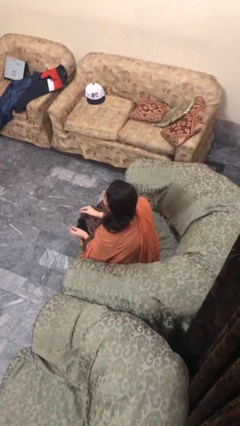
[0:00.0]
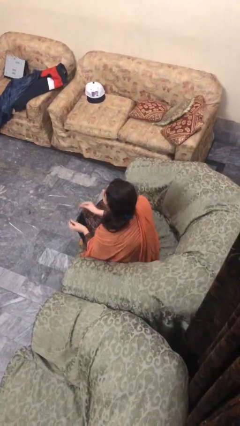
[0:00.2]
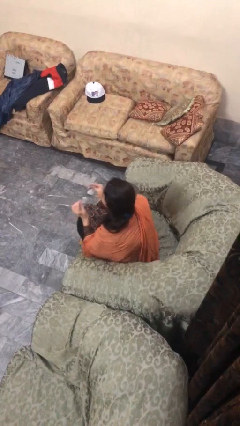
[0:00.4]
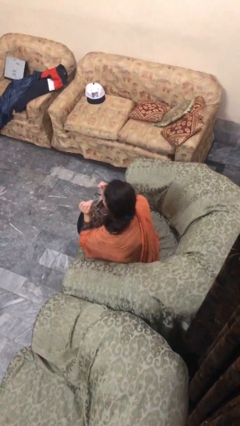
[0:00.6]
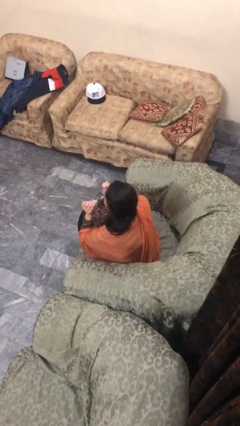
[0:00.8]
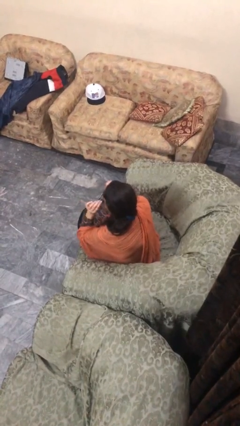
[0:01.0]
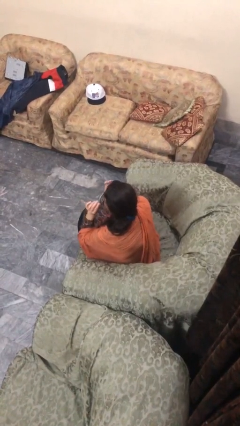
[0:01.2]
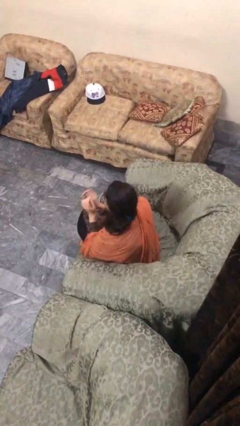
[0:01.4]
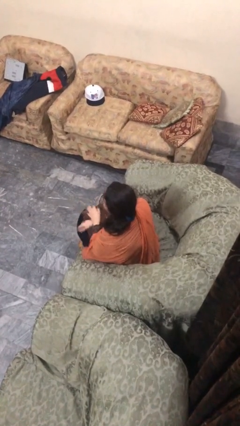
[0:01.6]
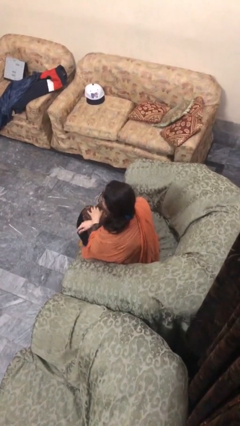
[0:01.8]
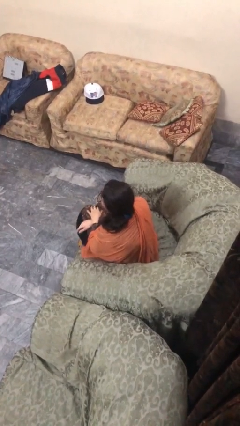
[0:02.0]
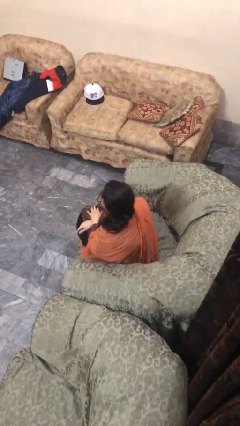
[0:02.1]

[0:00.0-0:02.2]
person puts on glasses

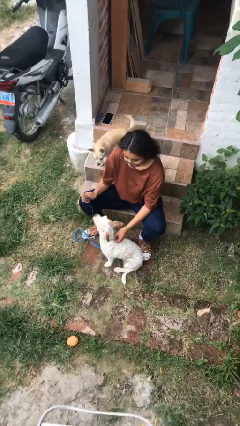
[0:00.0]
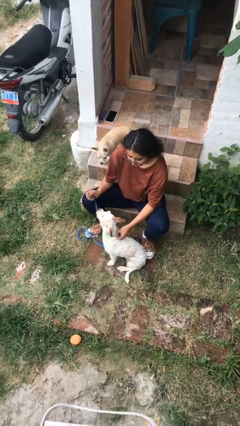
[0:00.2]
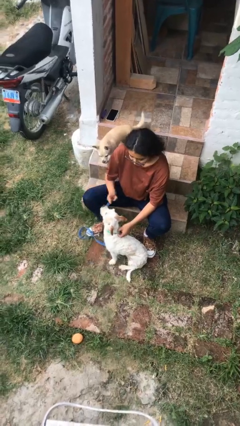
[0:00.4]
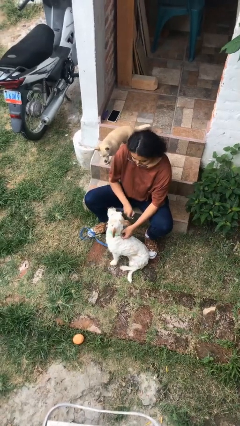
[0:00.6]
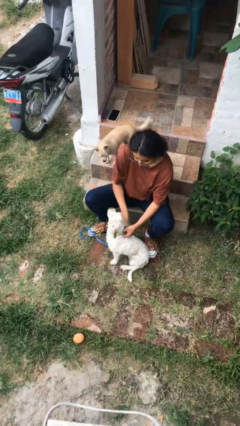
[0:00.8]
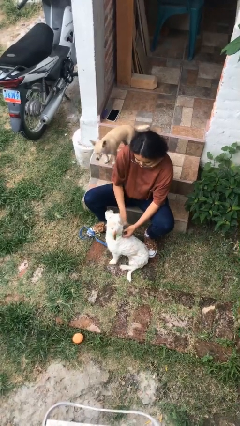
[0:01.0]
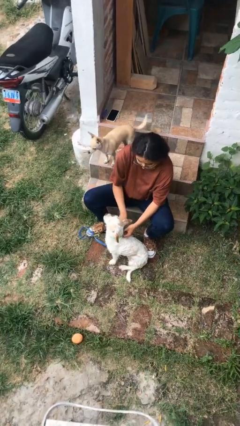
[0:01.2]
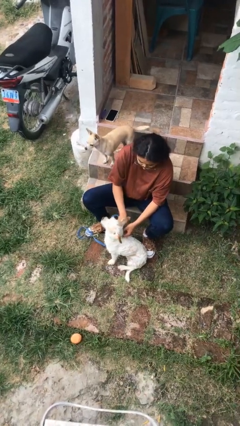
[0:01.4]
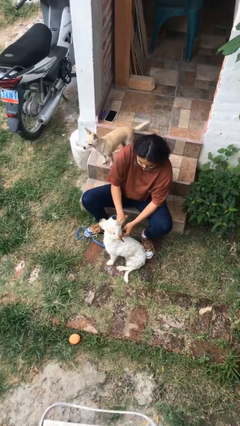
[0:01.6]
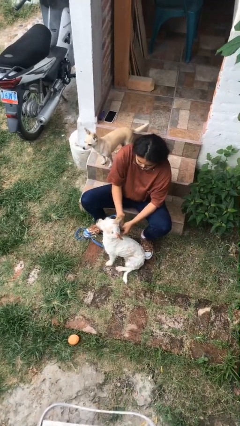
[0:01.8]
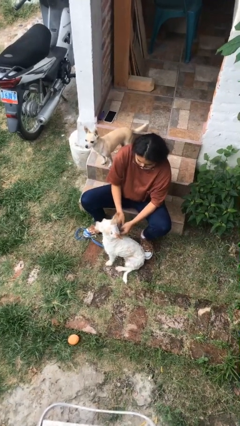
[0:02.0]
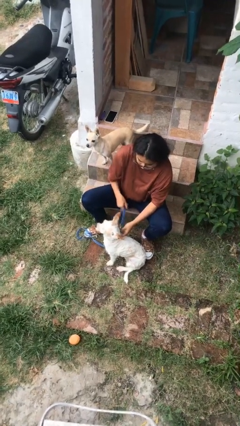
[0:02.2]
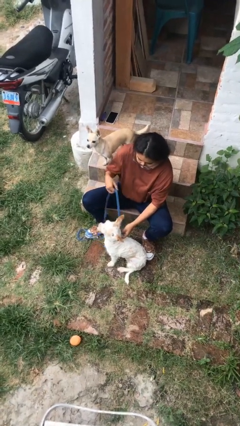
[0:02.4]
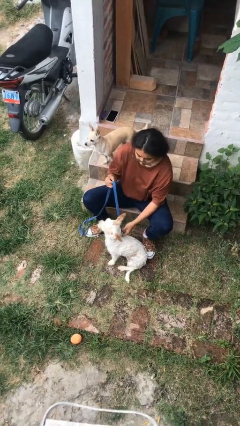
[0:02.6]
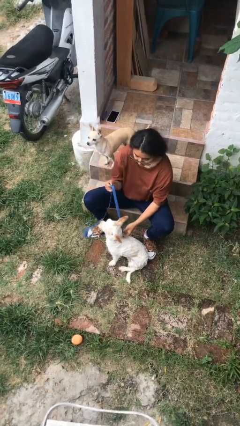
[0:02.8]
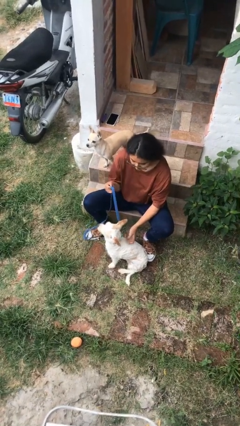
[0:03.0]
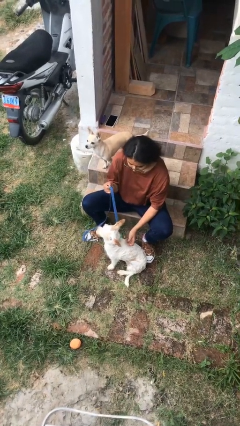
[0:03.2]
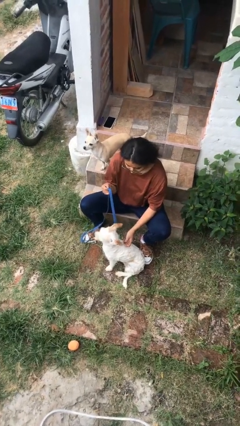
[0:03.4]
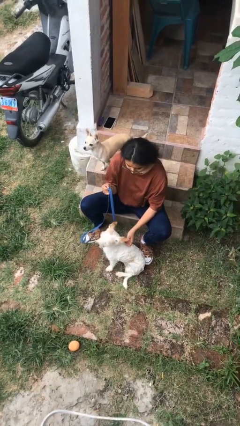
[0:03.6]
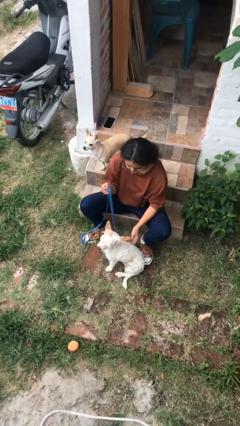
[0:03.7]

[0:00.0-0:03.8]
person attaches leash to dog

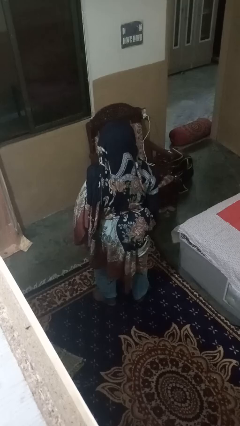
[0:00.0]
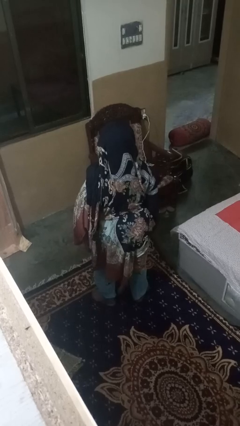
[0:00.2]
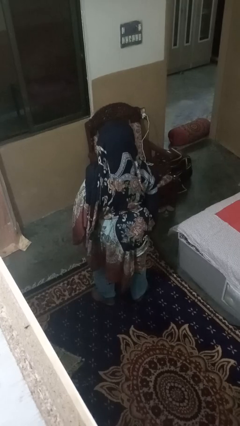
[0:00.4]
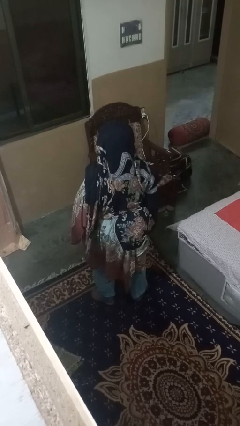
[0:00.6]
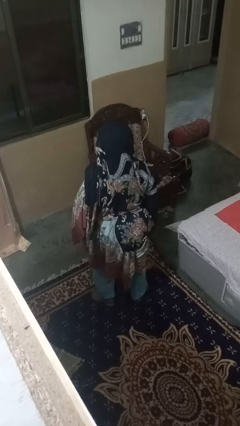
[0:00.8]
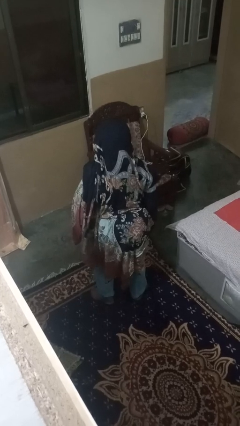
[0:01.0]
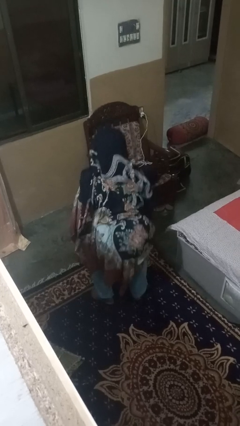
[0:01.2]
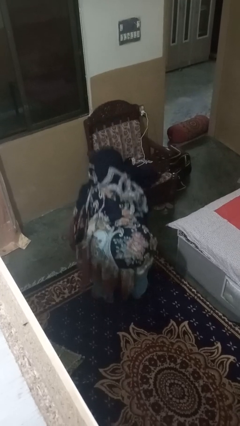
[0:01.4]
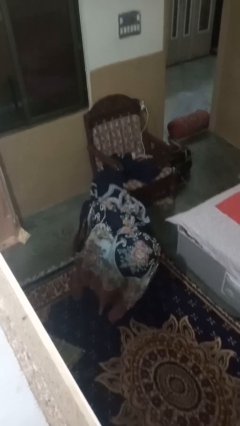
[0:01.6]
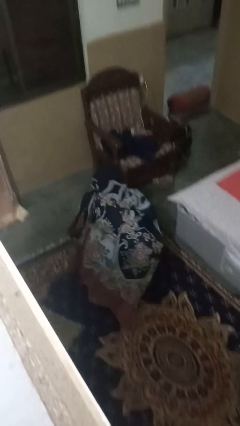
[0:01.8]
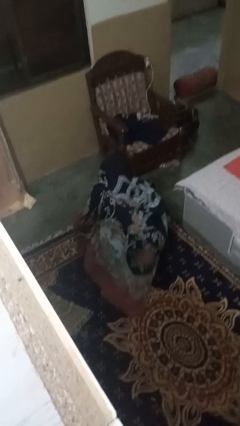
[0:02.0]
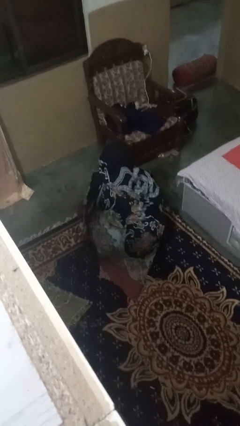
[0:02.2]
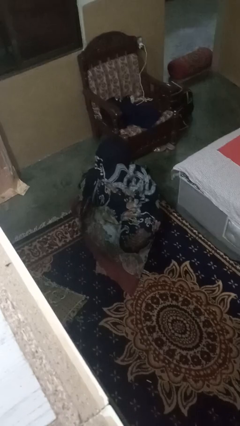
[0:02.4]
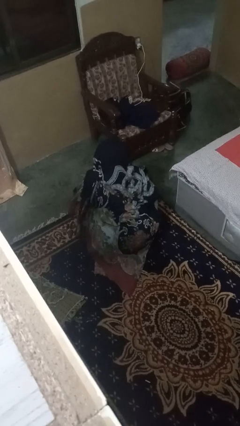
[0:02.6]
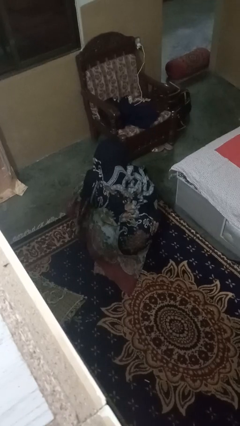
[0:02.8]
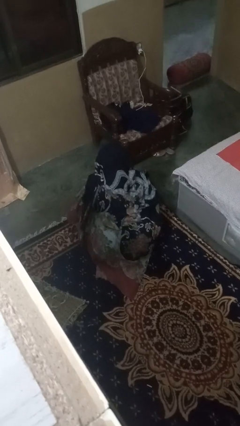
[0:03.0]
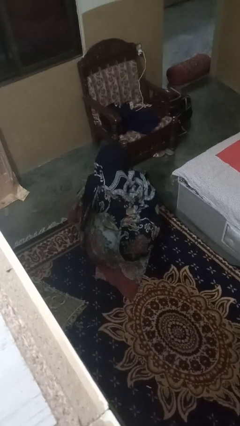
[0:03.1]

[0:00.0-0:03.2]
person squats

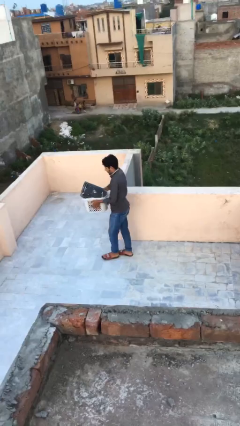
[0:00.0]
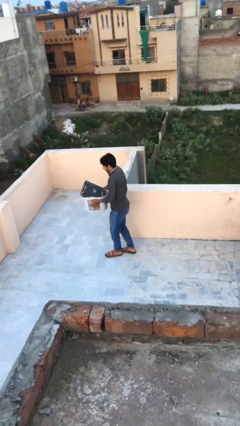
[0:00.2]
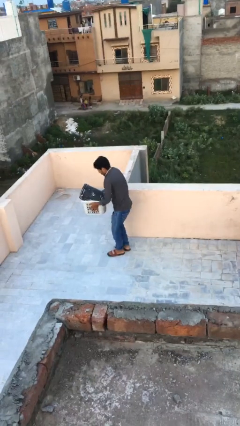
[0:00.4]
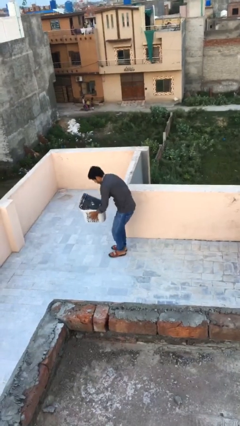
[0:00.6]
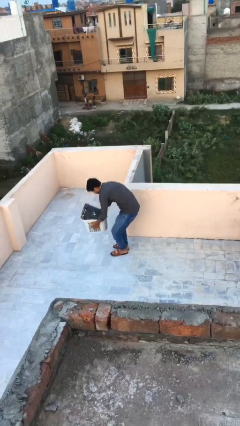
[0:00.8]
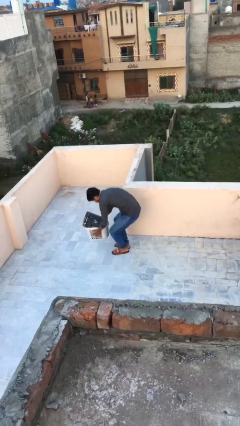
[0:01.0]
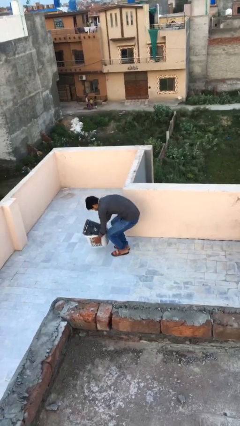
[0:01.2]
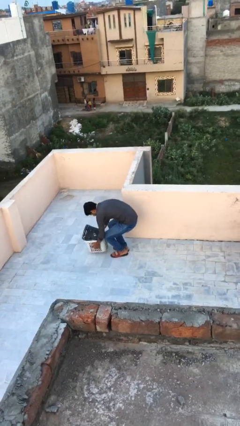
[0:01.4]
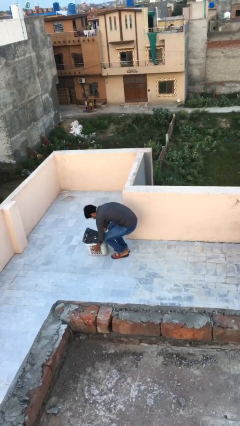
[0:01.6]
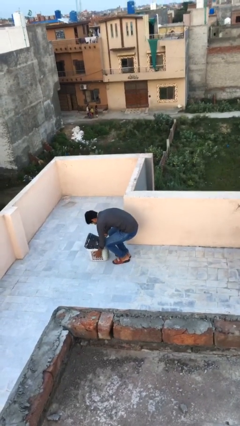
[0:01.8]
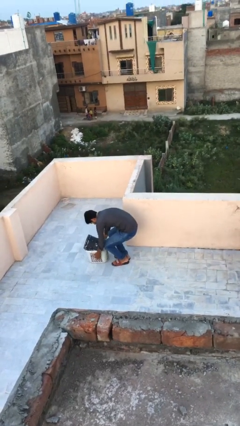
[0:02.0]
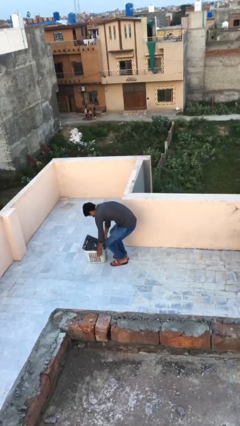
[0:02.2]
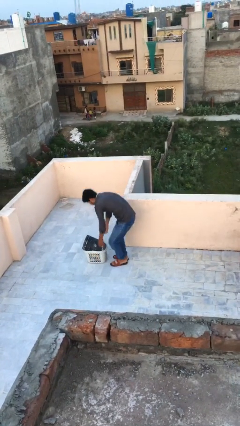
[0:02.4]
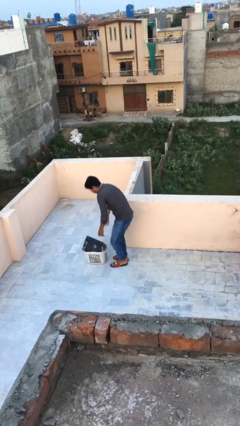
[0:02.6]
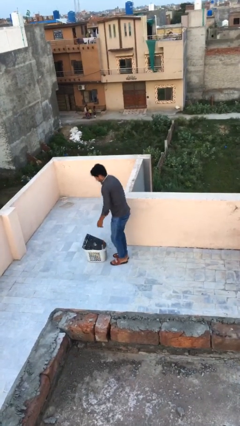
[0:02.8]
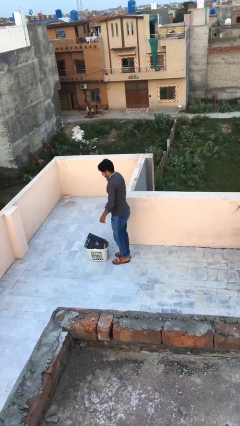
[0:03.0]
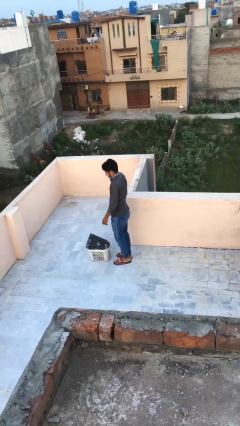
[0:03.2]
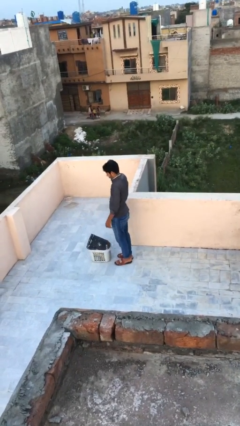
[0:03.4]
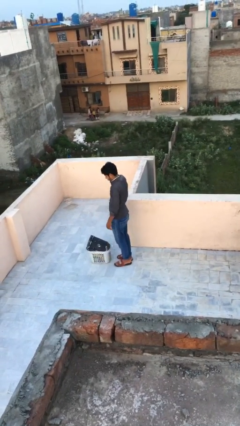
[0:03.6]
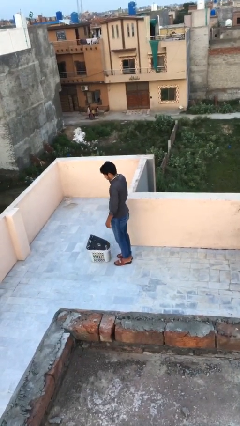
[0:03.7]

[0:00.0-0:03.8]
person puts down object on floor

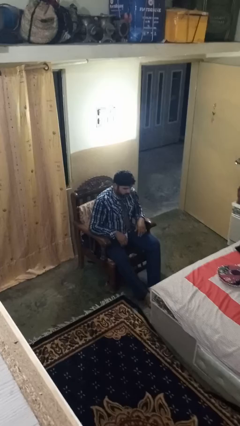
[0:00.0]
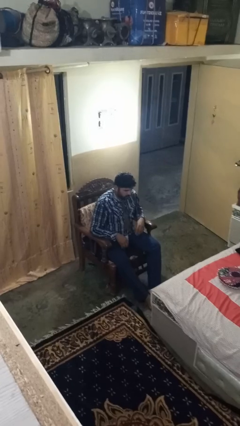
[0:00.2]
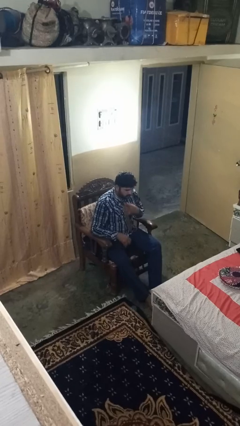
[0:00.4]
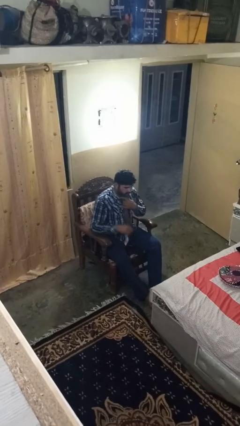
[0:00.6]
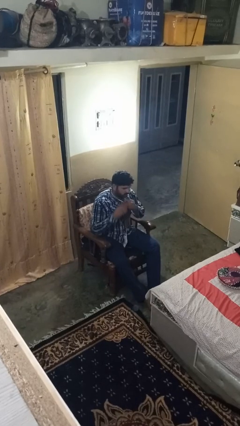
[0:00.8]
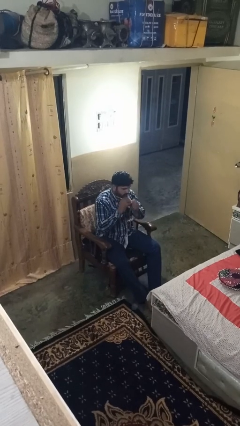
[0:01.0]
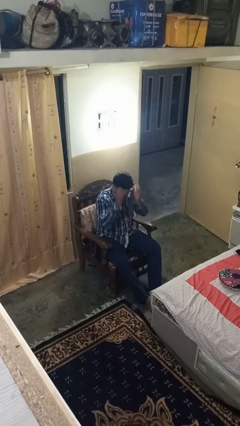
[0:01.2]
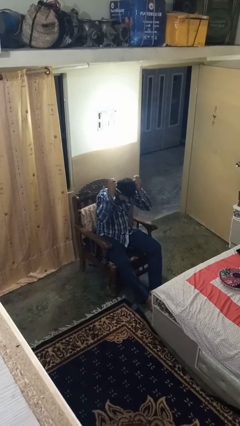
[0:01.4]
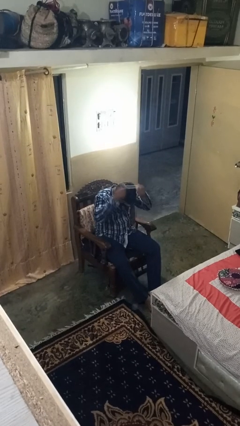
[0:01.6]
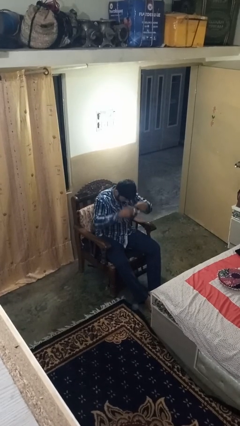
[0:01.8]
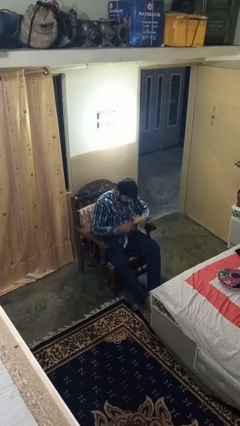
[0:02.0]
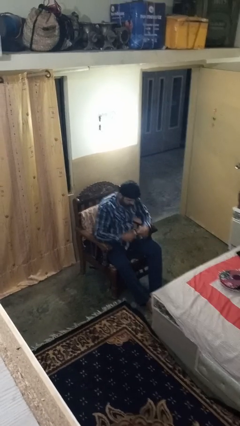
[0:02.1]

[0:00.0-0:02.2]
person takes off necktie

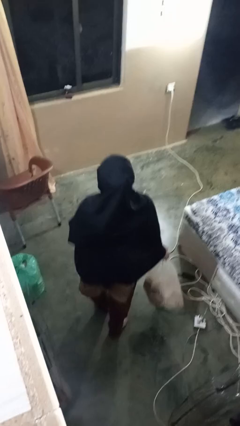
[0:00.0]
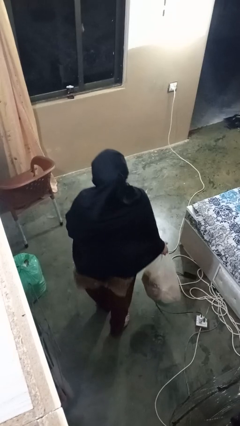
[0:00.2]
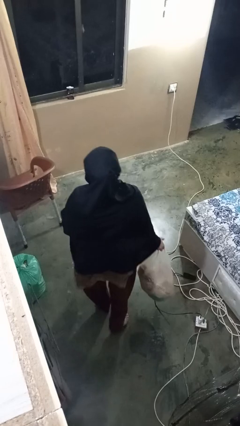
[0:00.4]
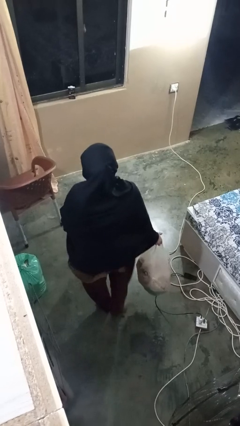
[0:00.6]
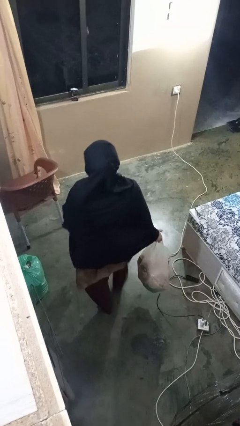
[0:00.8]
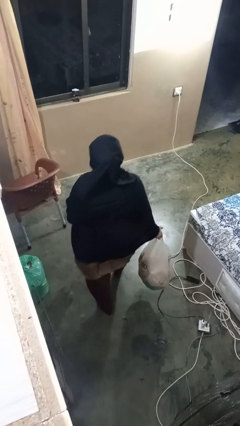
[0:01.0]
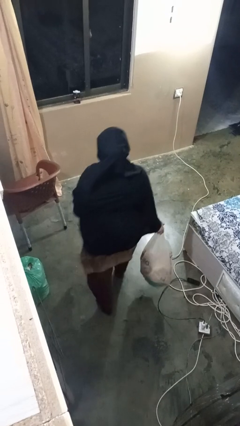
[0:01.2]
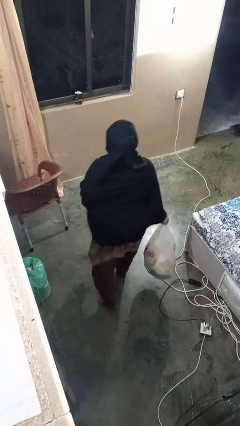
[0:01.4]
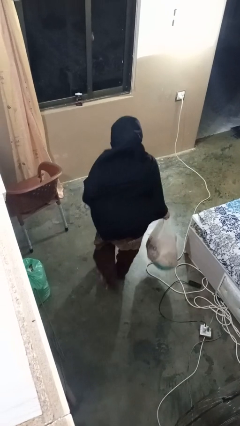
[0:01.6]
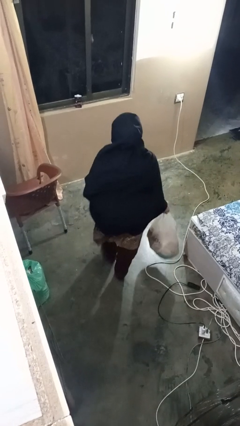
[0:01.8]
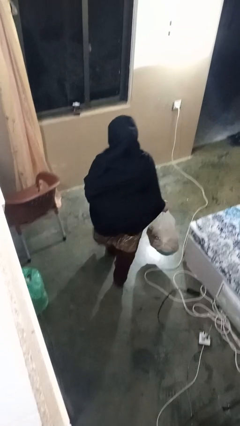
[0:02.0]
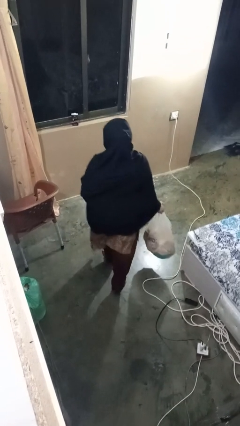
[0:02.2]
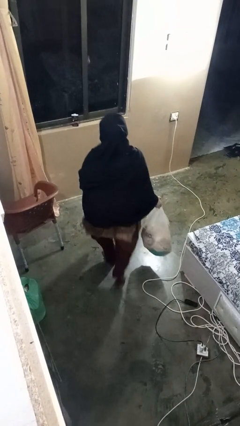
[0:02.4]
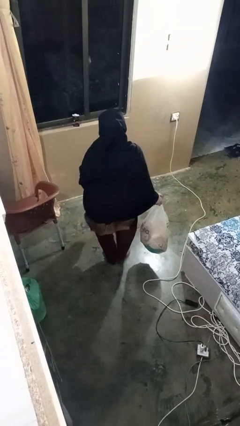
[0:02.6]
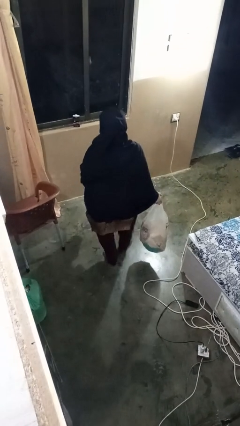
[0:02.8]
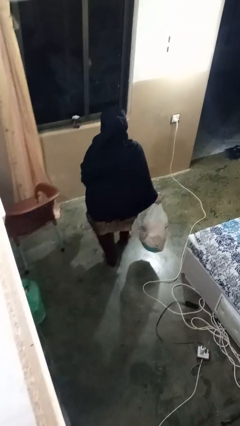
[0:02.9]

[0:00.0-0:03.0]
person carries groceries
